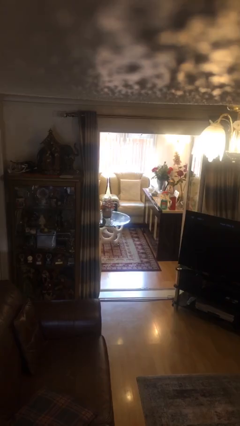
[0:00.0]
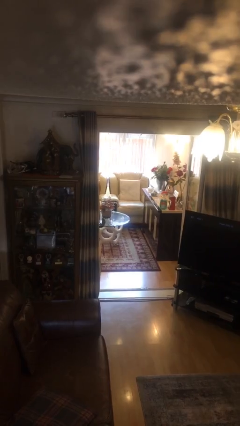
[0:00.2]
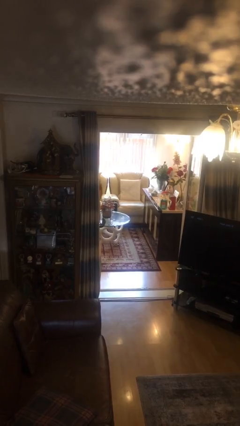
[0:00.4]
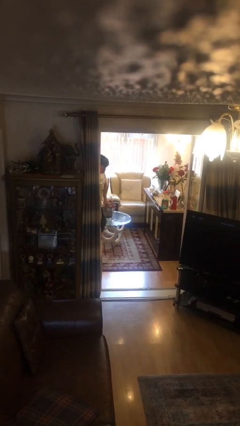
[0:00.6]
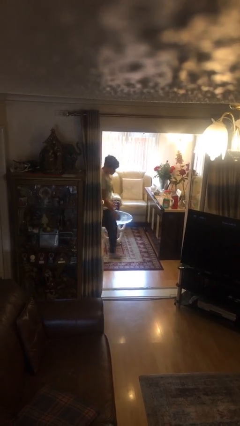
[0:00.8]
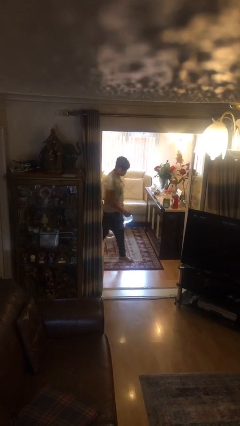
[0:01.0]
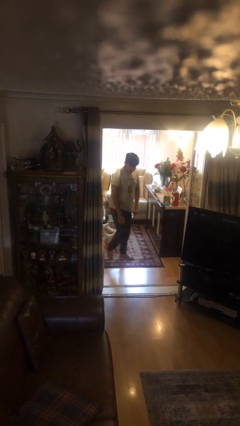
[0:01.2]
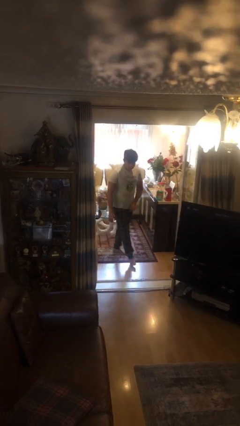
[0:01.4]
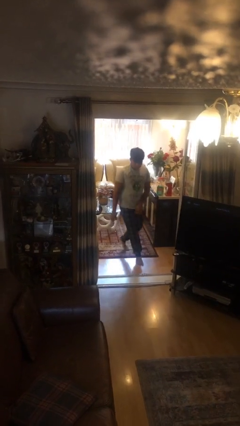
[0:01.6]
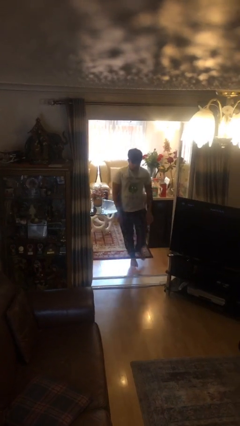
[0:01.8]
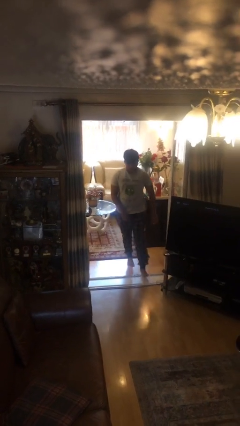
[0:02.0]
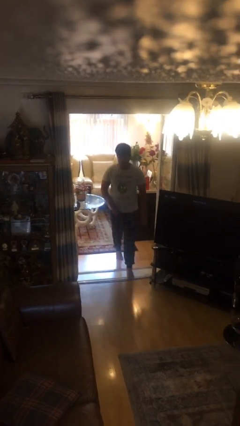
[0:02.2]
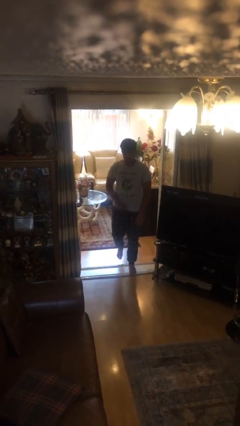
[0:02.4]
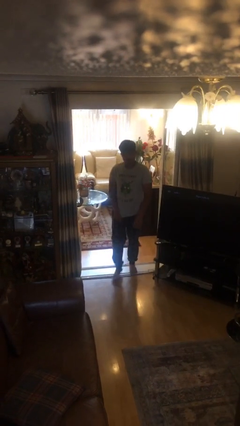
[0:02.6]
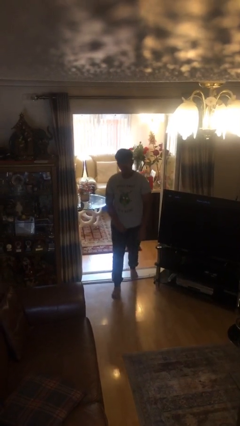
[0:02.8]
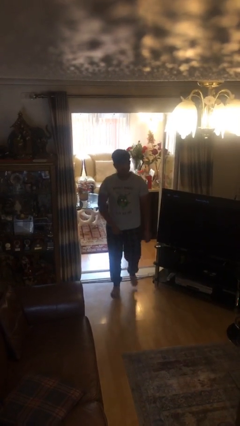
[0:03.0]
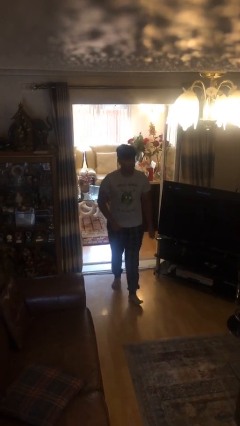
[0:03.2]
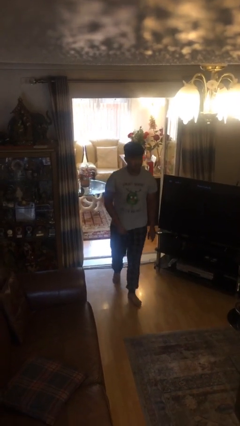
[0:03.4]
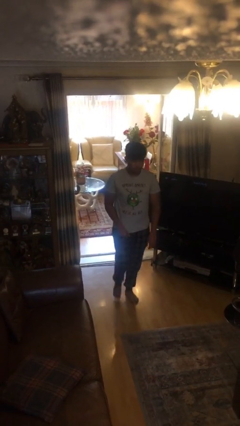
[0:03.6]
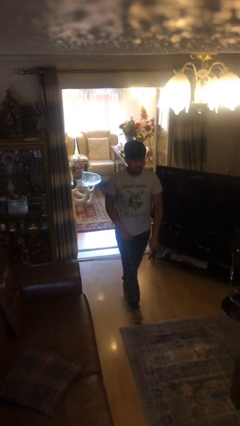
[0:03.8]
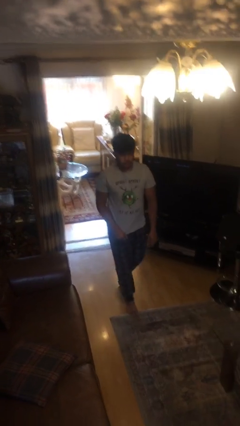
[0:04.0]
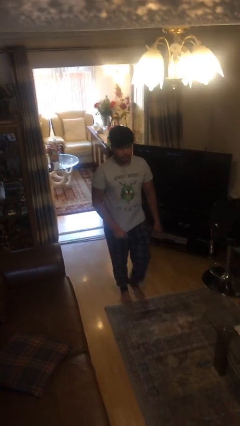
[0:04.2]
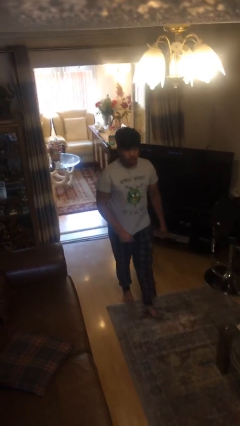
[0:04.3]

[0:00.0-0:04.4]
person enters scene through structure

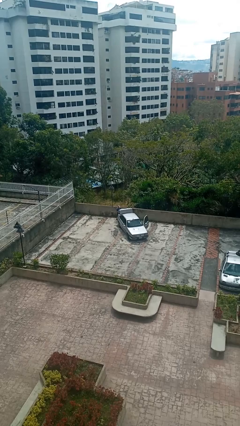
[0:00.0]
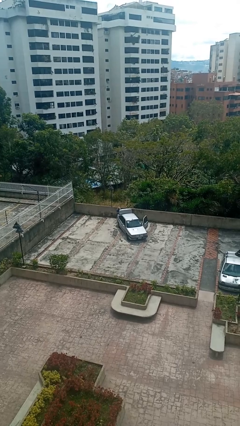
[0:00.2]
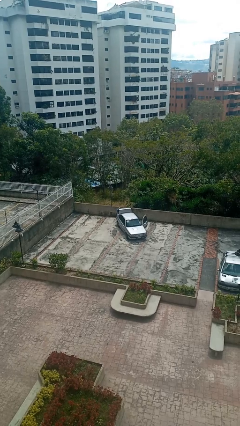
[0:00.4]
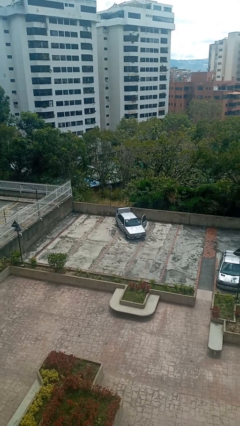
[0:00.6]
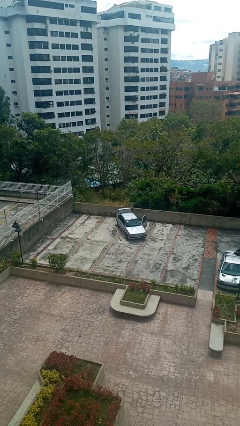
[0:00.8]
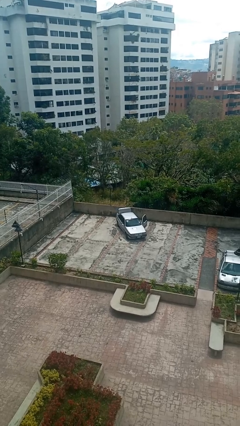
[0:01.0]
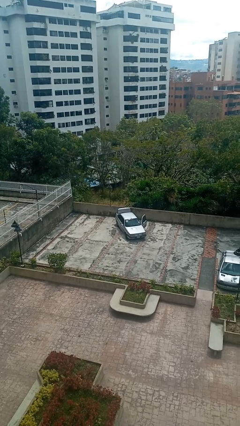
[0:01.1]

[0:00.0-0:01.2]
person loads car

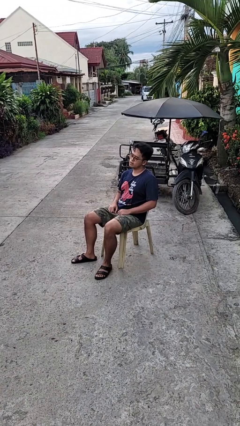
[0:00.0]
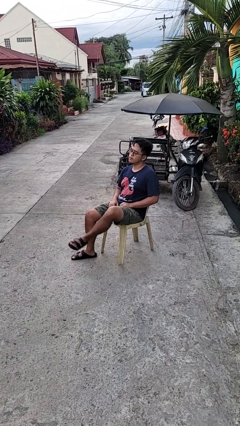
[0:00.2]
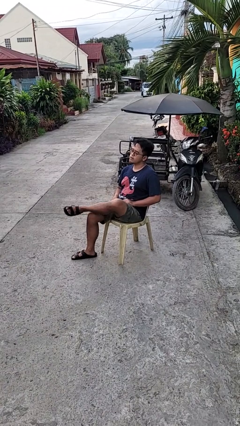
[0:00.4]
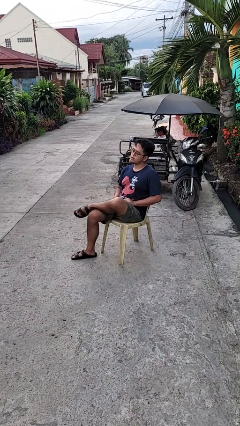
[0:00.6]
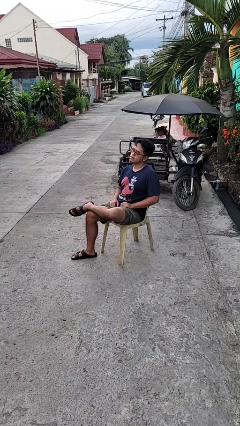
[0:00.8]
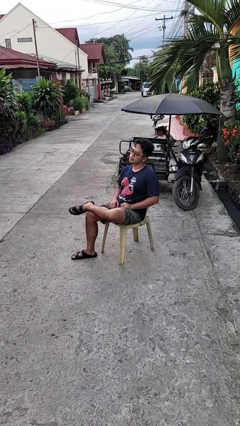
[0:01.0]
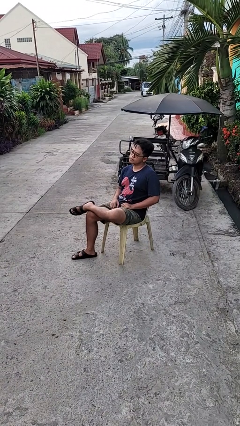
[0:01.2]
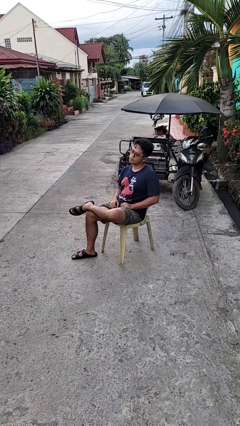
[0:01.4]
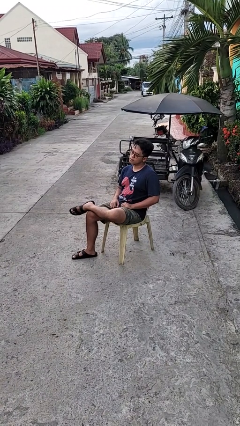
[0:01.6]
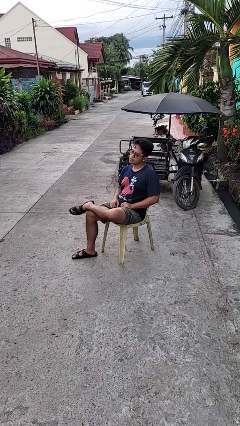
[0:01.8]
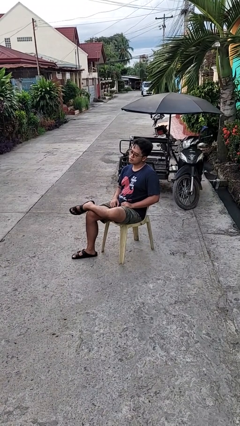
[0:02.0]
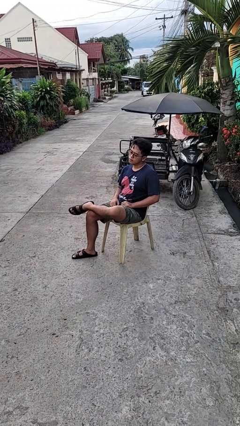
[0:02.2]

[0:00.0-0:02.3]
person crosses legs

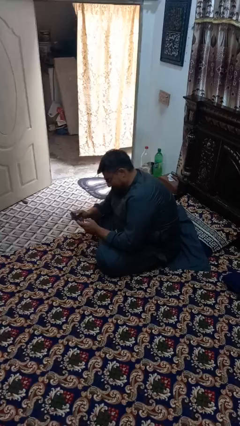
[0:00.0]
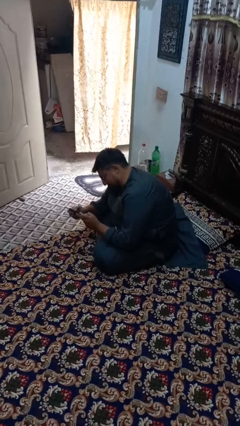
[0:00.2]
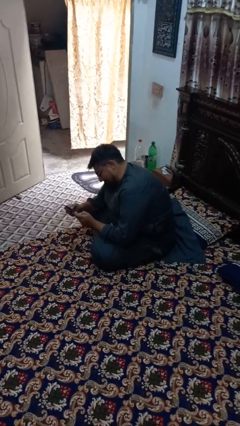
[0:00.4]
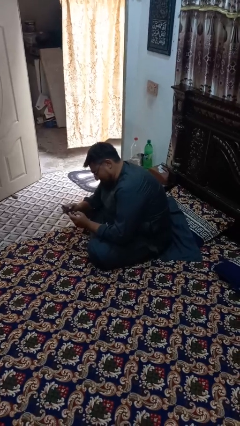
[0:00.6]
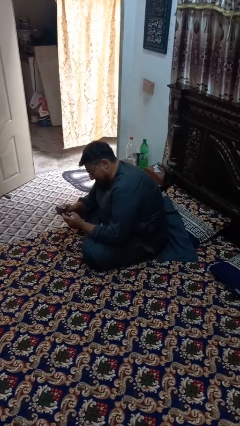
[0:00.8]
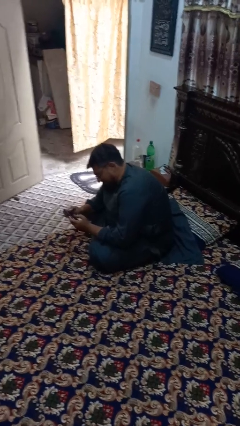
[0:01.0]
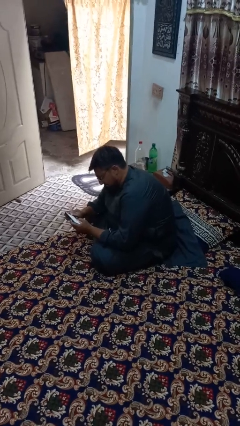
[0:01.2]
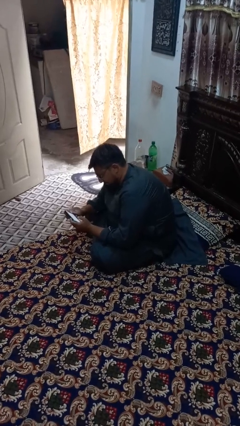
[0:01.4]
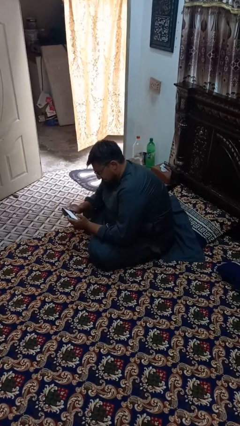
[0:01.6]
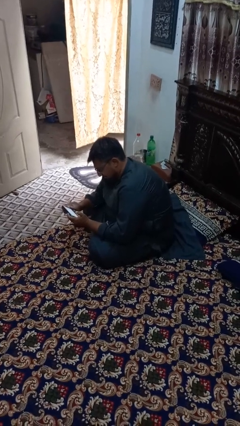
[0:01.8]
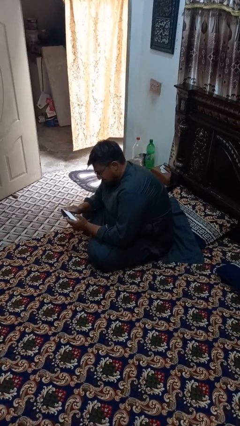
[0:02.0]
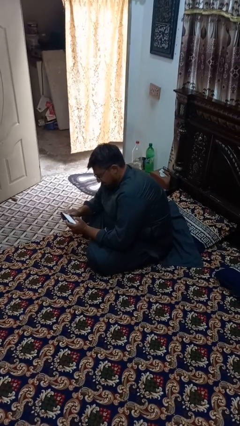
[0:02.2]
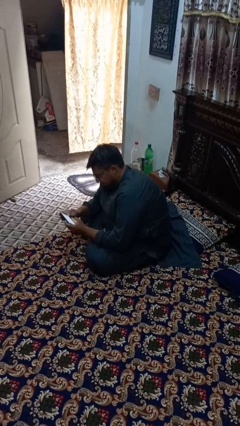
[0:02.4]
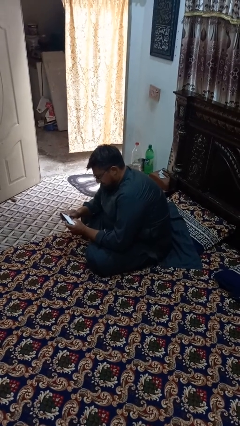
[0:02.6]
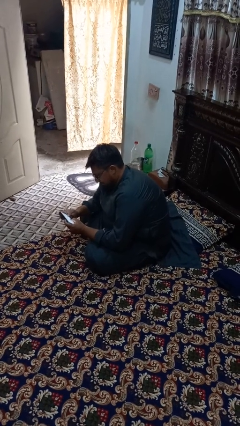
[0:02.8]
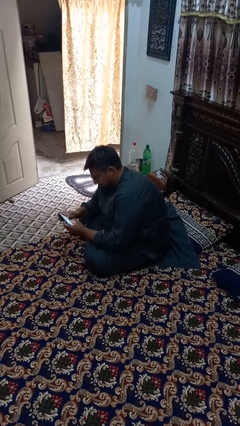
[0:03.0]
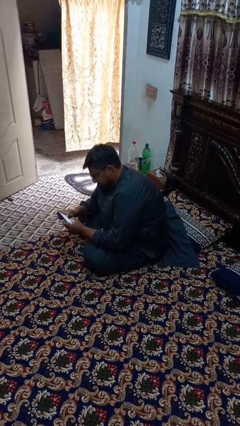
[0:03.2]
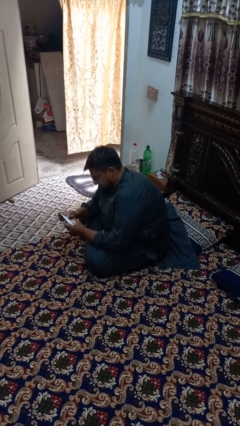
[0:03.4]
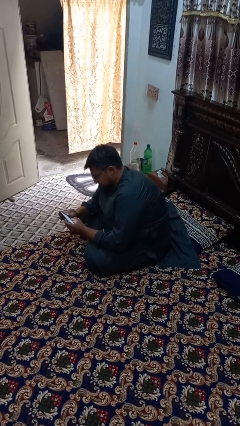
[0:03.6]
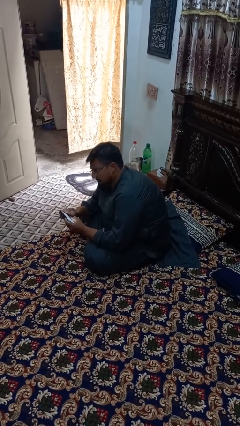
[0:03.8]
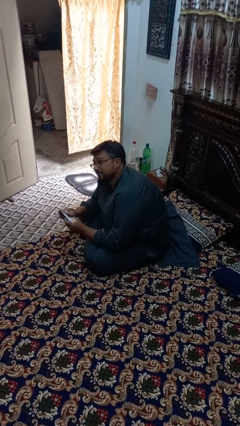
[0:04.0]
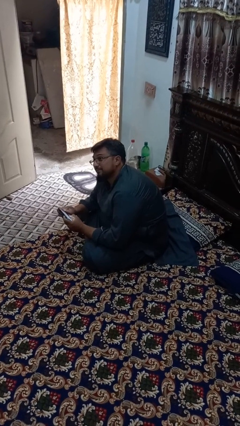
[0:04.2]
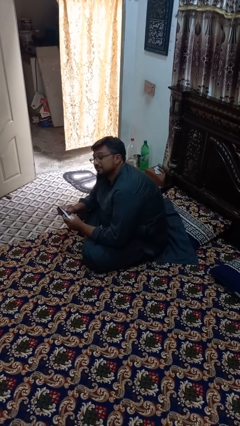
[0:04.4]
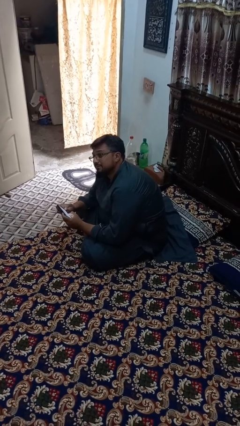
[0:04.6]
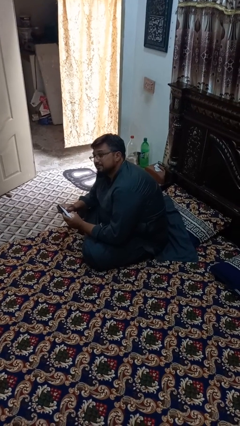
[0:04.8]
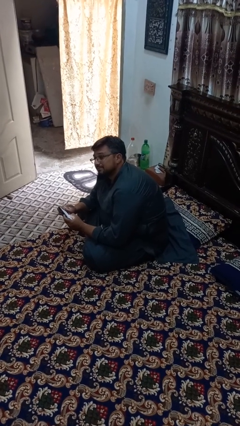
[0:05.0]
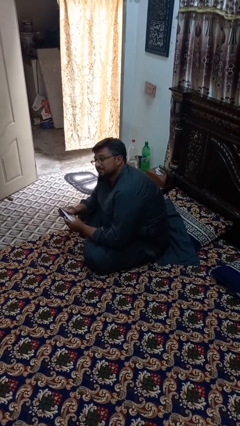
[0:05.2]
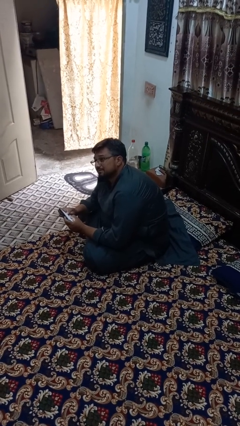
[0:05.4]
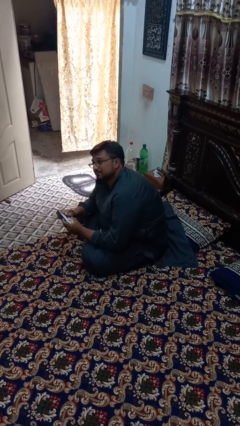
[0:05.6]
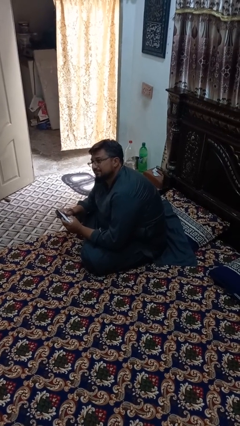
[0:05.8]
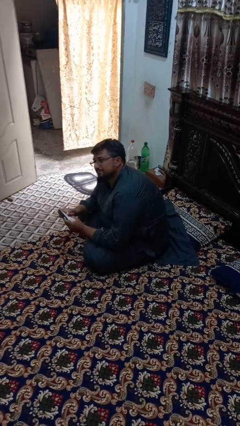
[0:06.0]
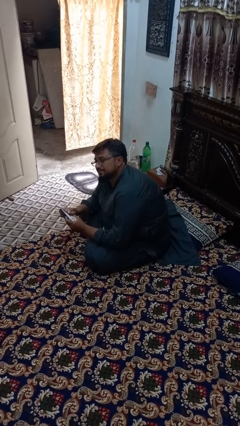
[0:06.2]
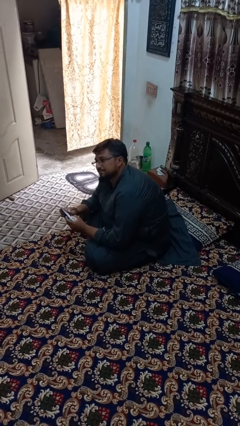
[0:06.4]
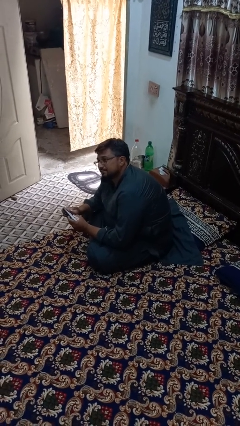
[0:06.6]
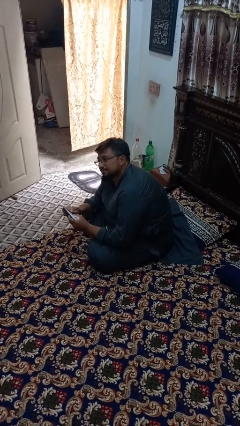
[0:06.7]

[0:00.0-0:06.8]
person interacts with handheld game

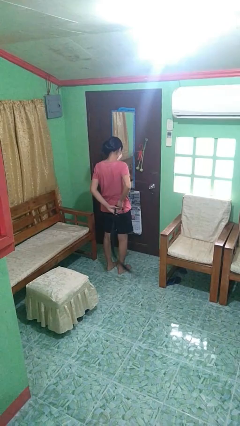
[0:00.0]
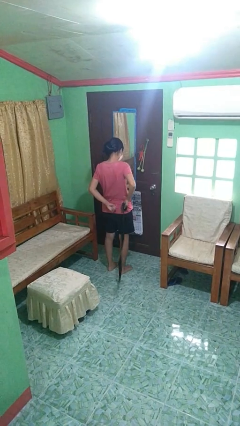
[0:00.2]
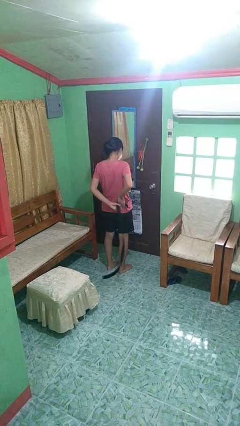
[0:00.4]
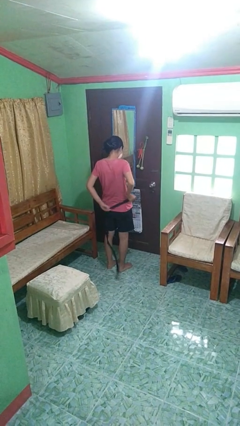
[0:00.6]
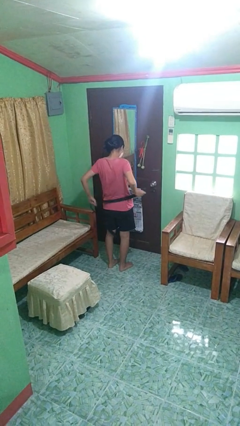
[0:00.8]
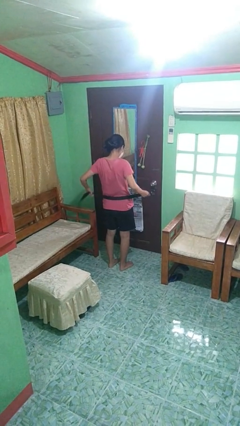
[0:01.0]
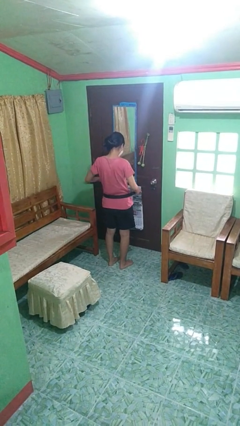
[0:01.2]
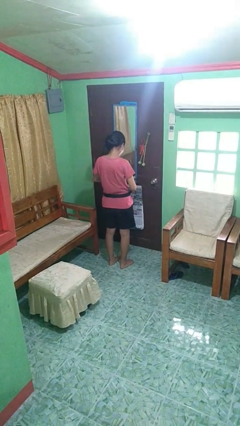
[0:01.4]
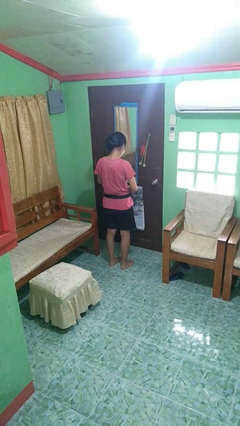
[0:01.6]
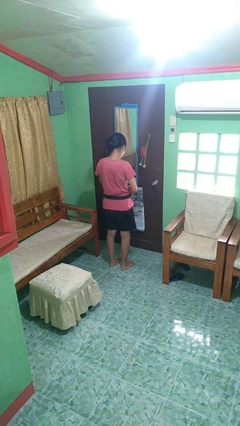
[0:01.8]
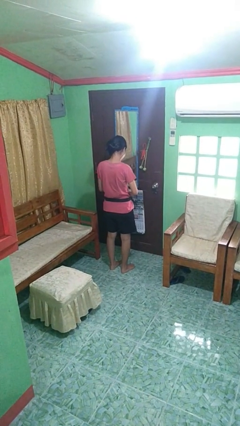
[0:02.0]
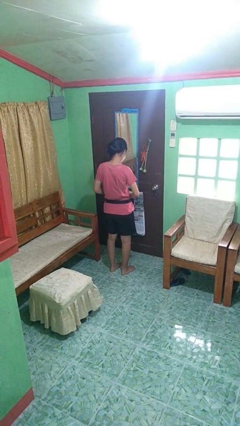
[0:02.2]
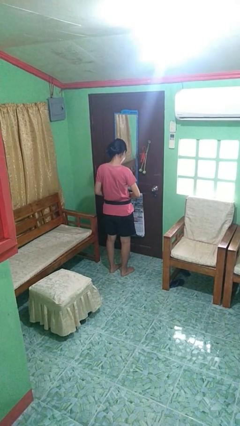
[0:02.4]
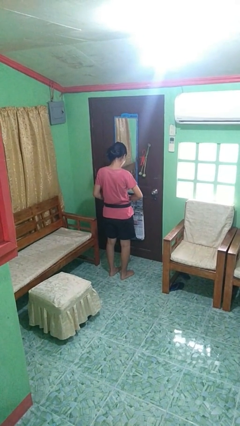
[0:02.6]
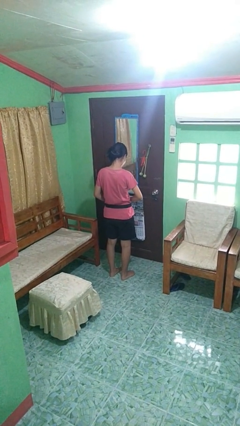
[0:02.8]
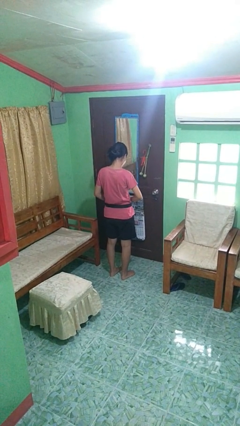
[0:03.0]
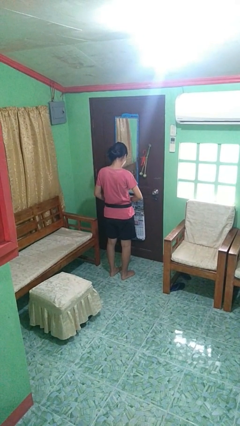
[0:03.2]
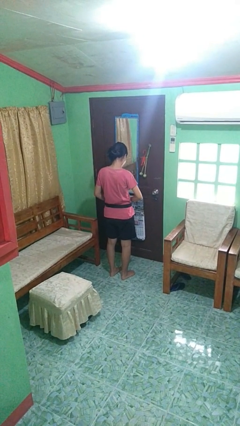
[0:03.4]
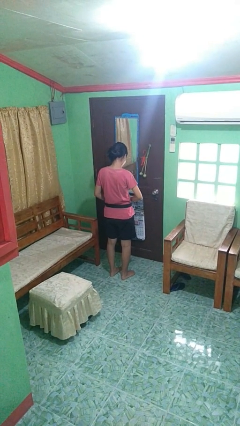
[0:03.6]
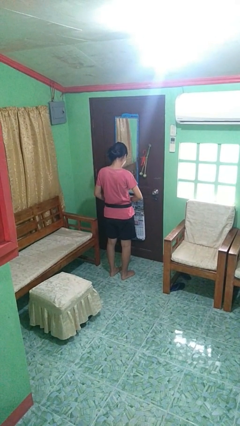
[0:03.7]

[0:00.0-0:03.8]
person puts on belt
